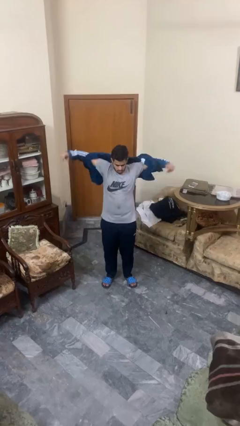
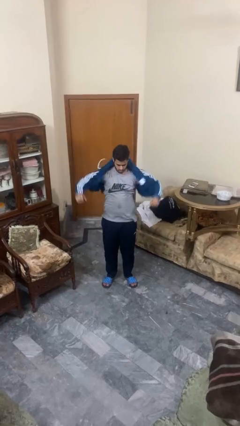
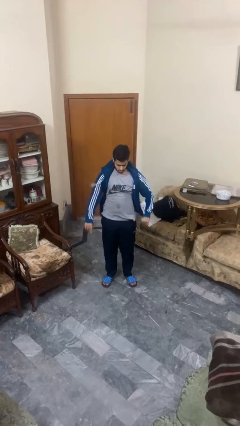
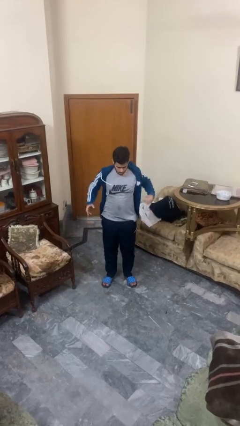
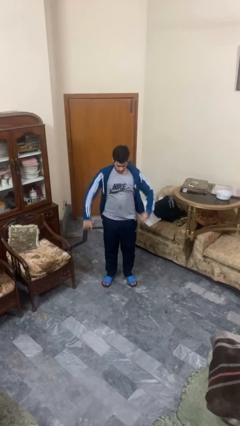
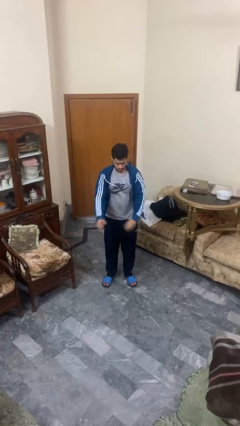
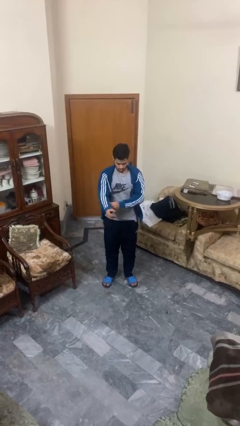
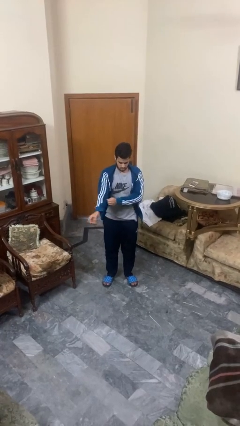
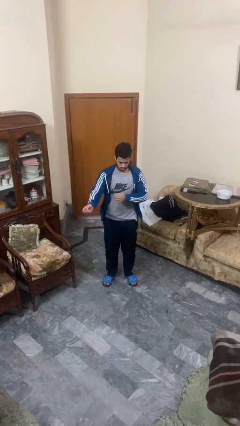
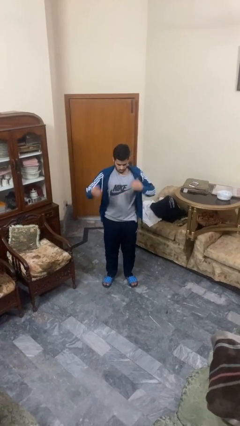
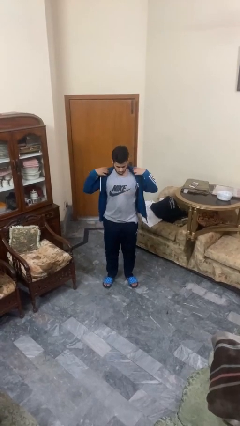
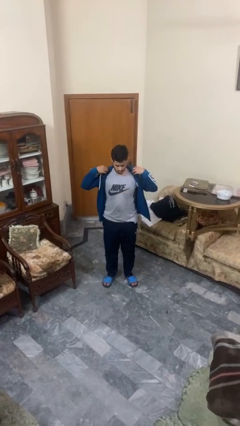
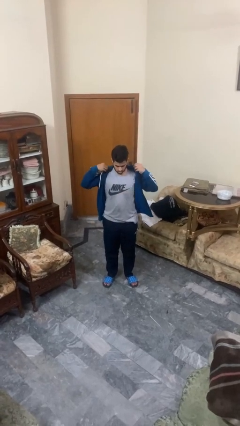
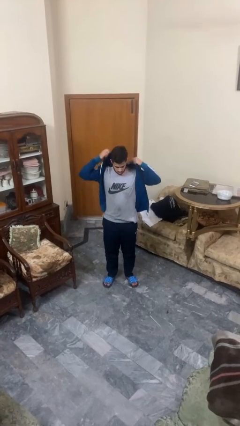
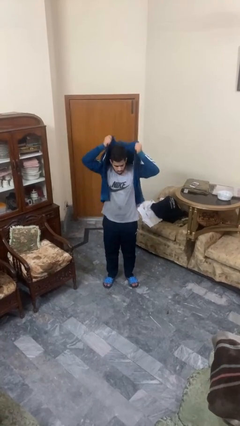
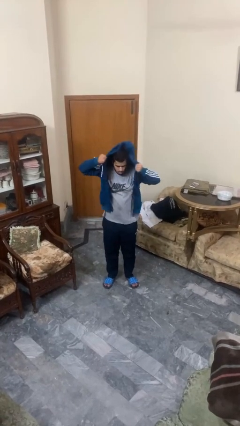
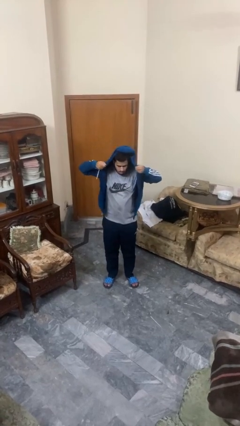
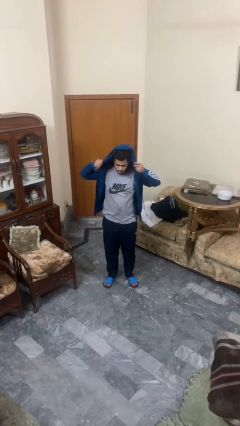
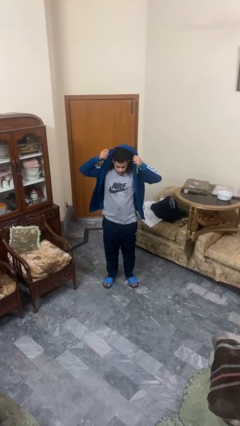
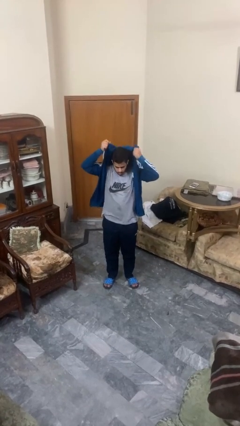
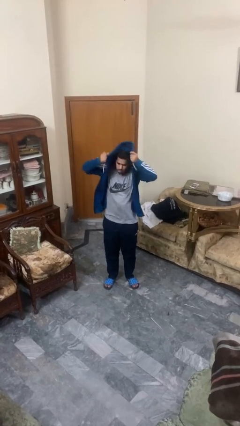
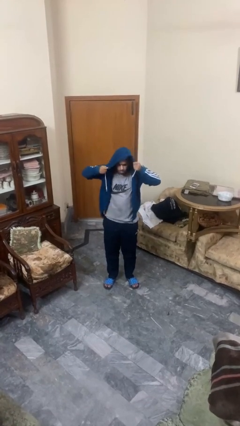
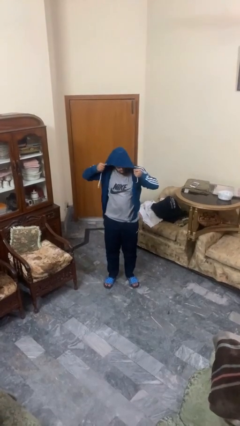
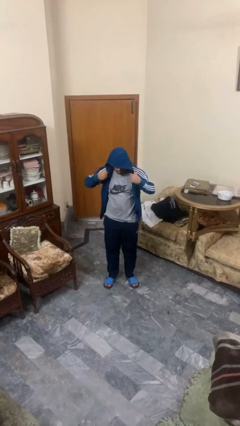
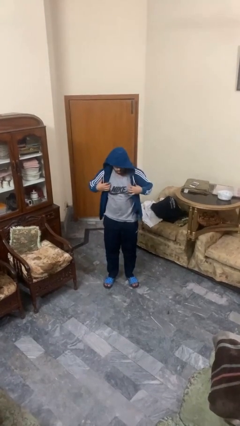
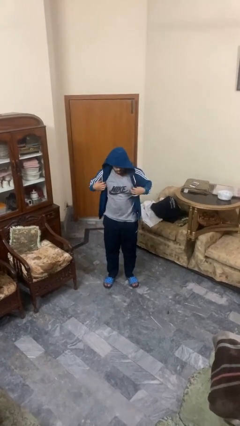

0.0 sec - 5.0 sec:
person puts on hoodie

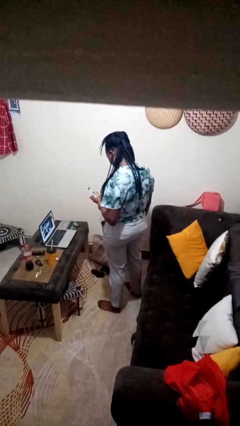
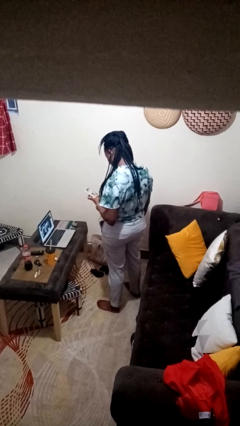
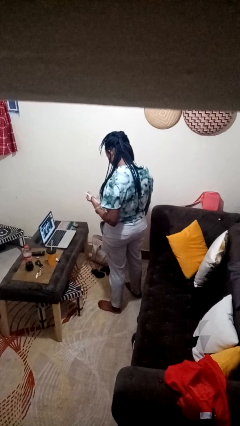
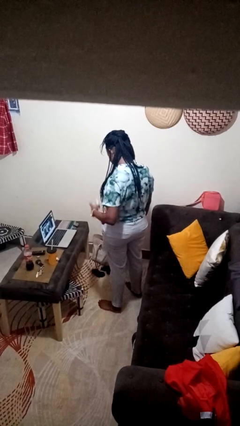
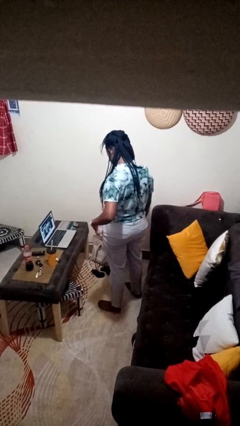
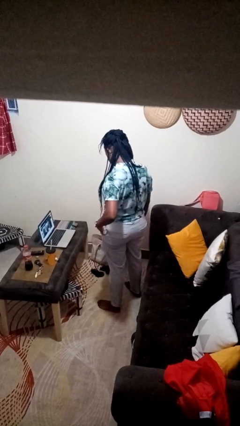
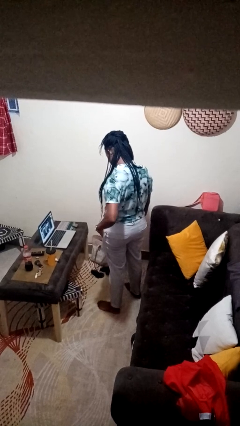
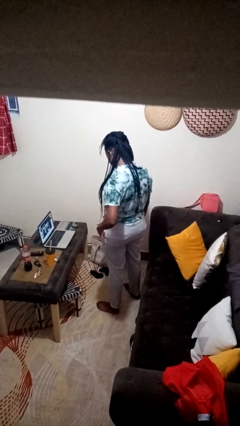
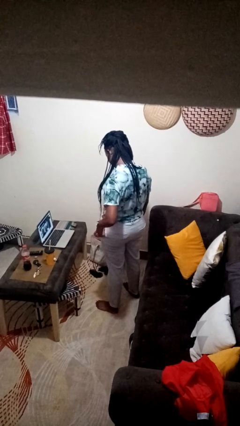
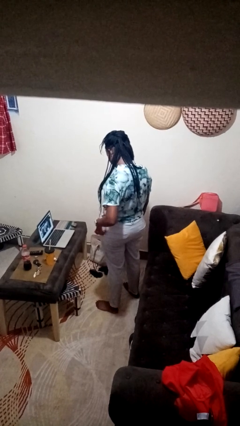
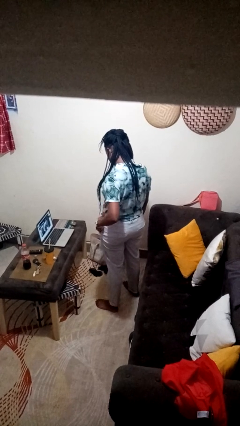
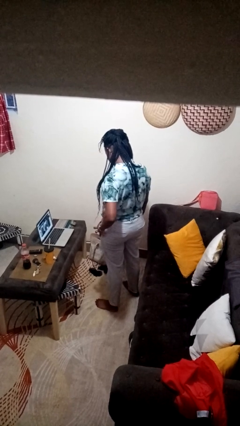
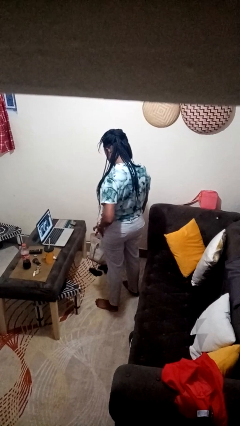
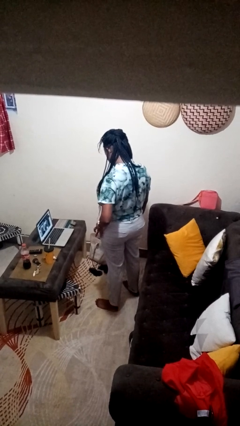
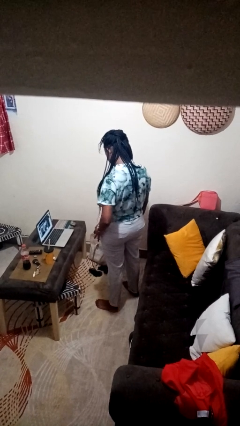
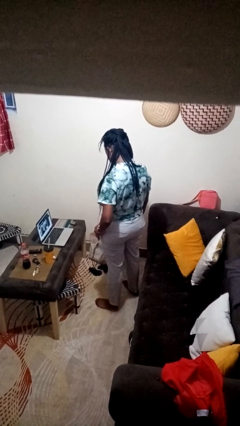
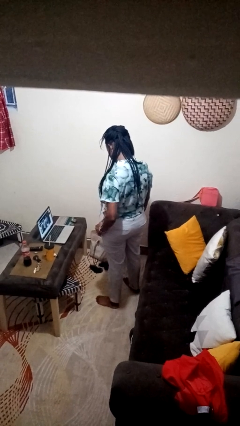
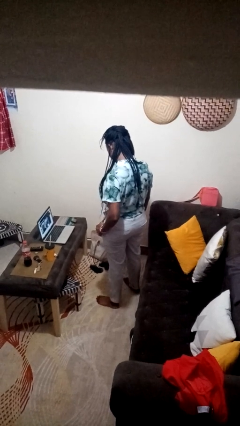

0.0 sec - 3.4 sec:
person puts phone into pocket

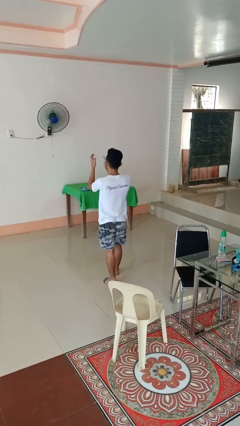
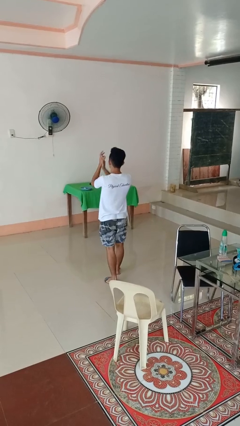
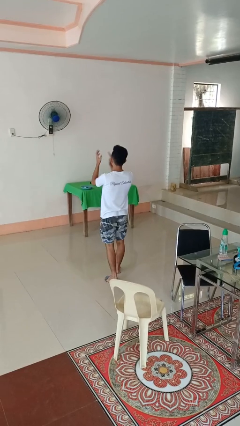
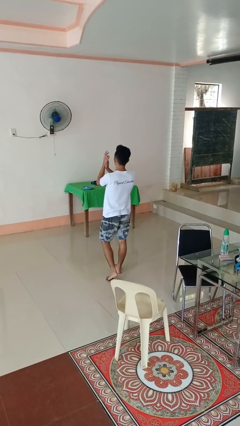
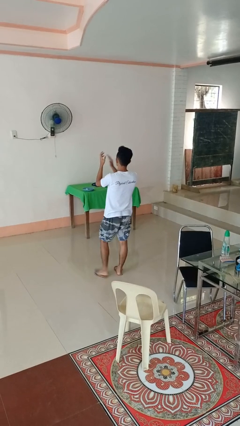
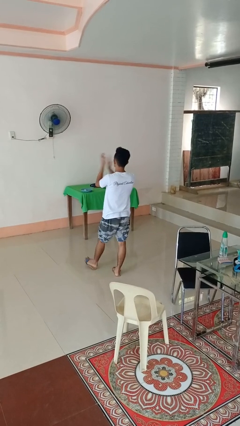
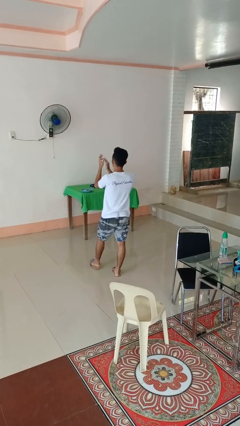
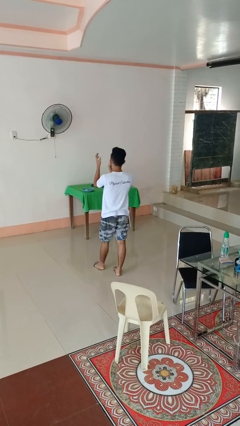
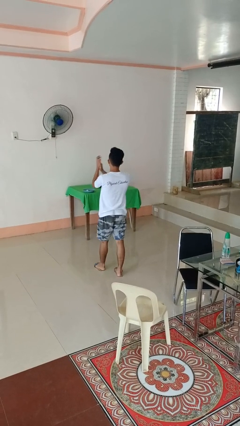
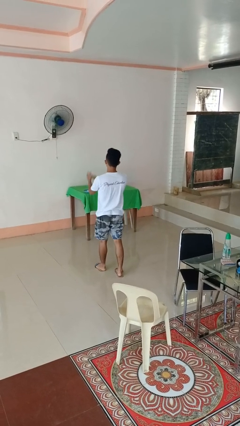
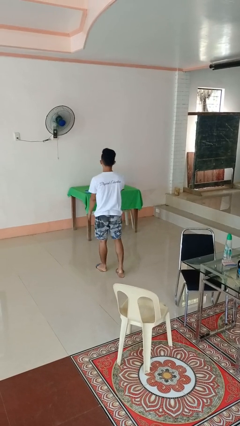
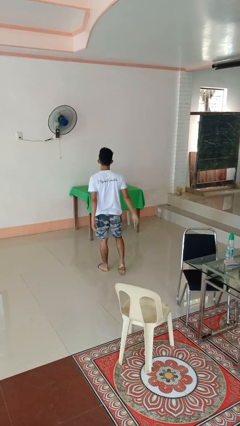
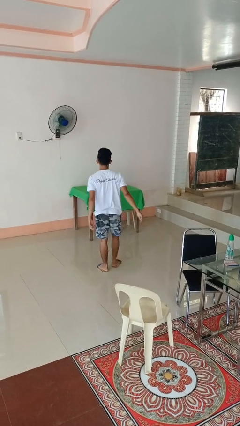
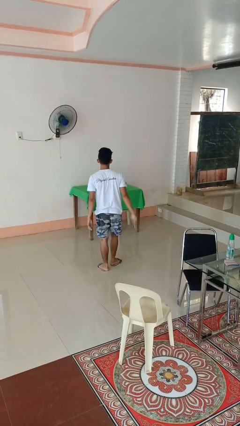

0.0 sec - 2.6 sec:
person claps hands

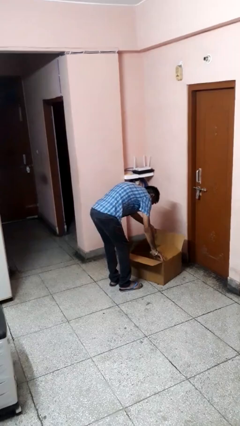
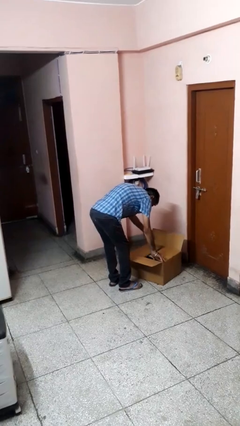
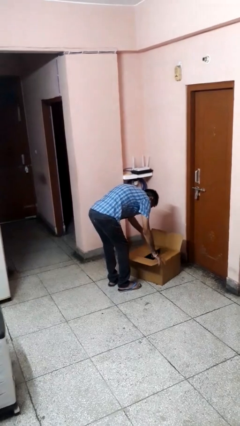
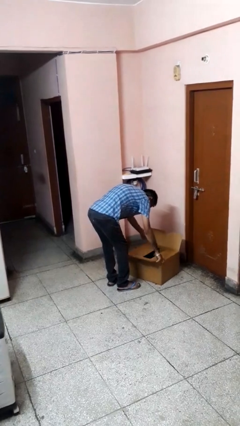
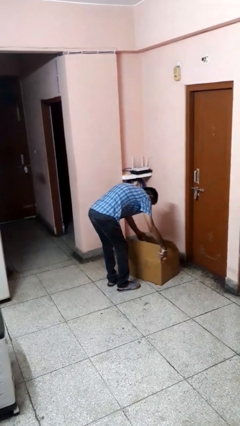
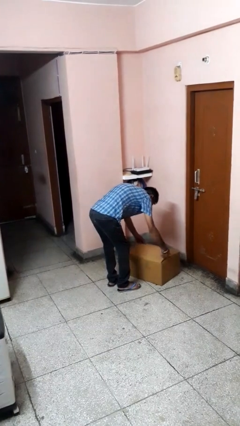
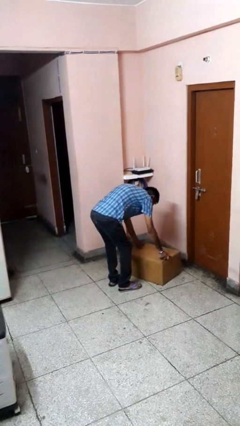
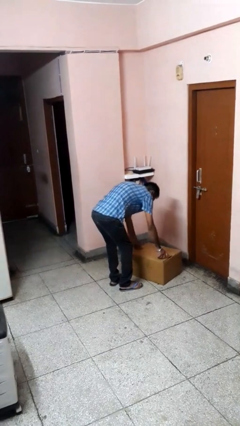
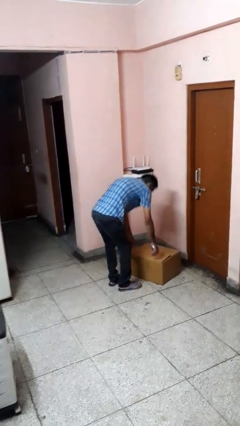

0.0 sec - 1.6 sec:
person closes box

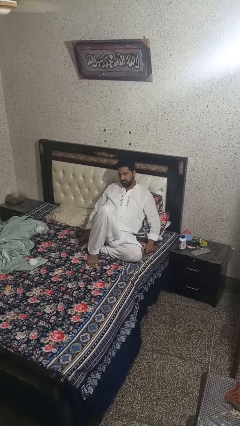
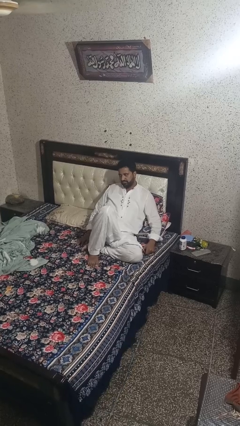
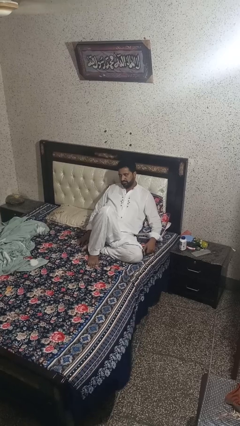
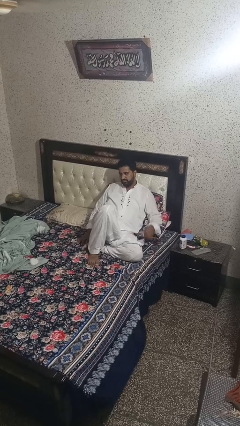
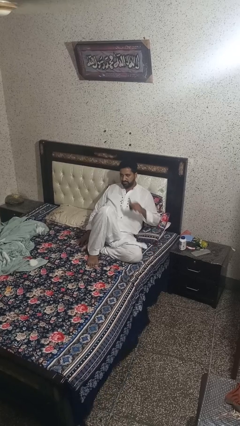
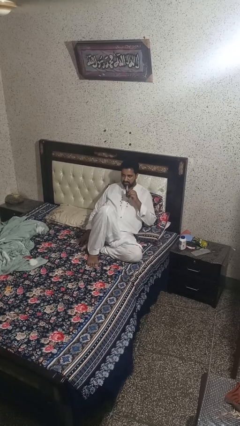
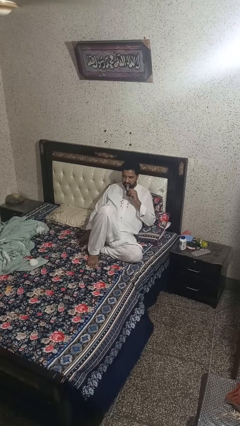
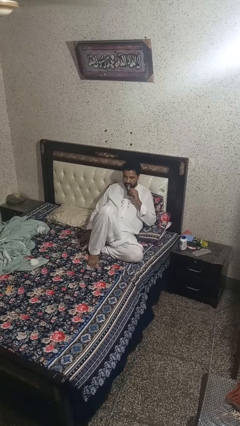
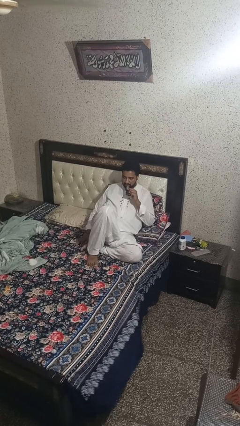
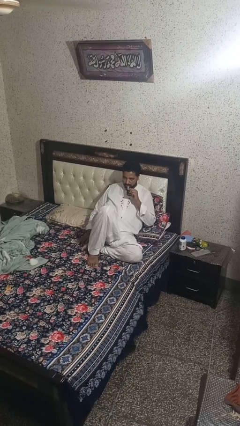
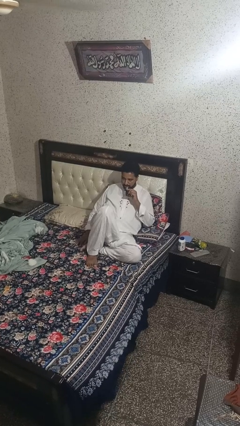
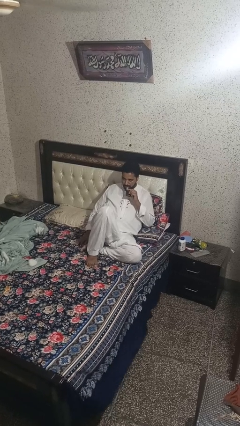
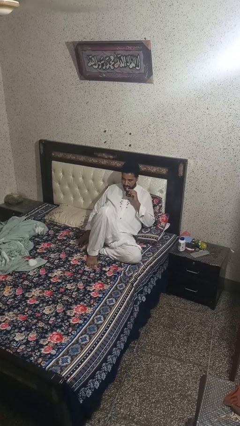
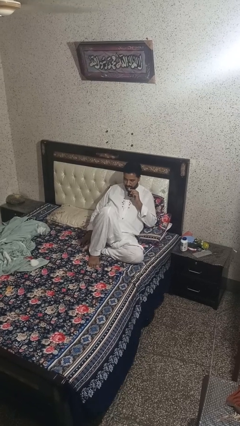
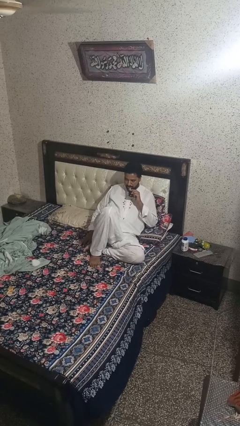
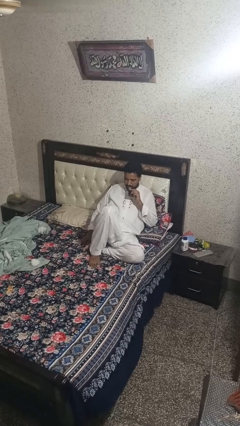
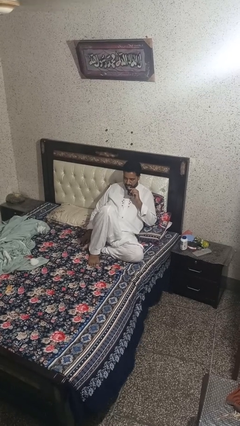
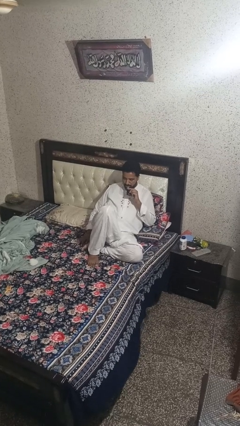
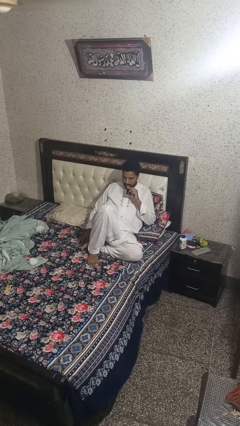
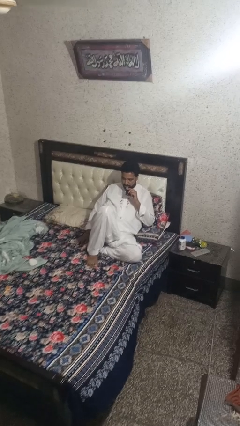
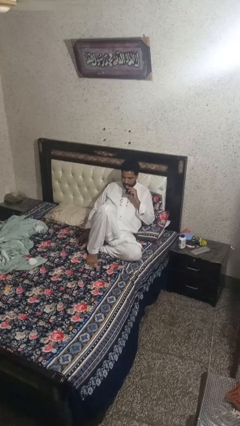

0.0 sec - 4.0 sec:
person vapes

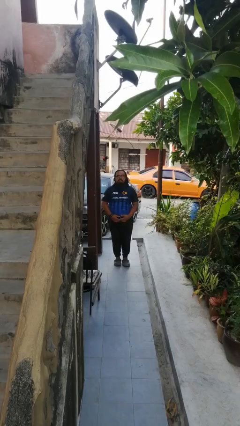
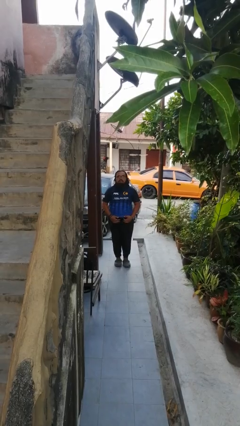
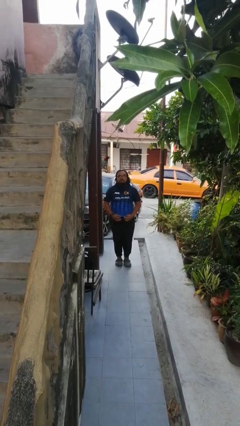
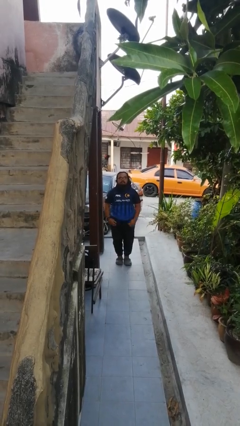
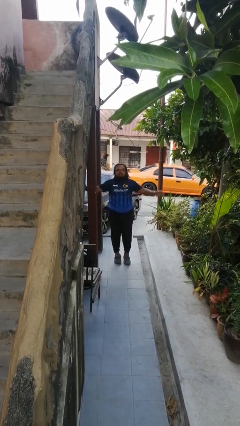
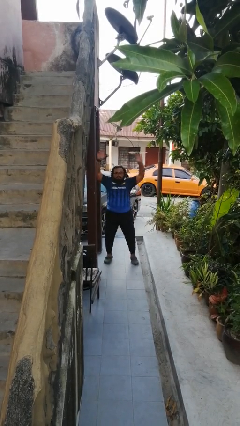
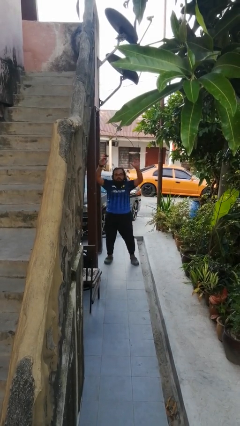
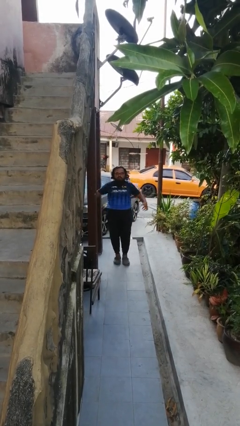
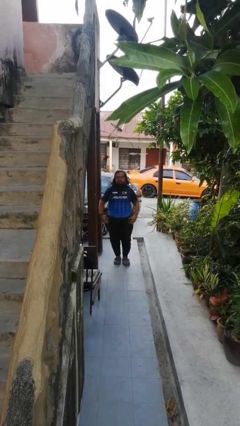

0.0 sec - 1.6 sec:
person exercises with jumping jacks
